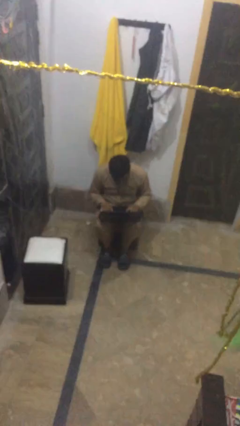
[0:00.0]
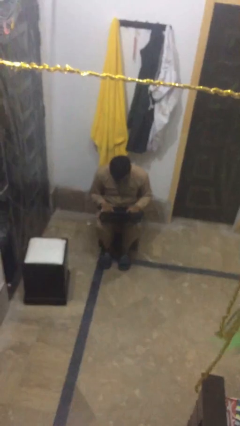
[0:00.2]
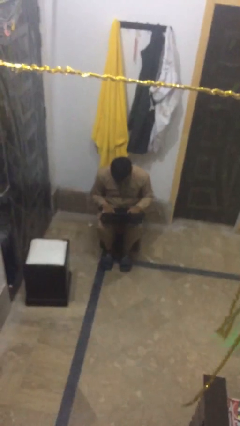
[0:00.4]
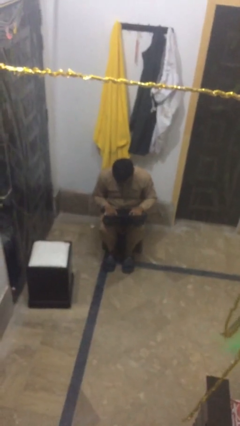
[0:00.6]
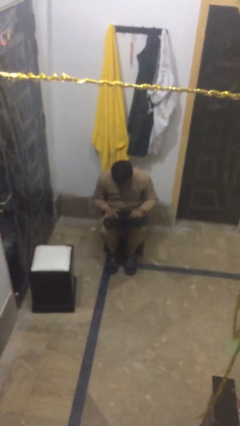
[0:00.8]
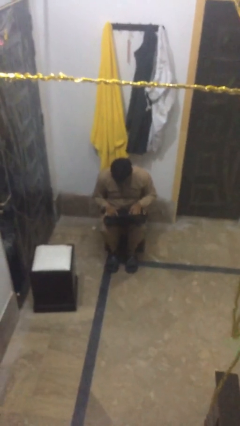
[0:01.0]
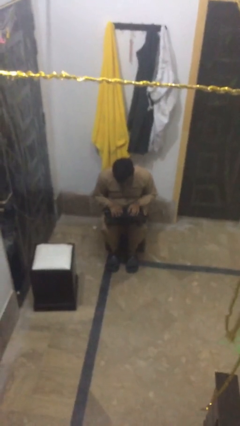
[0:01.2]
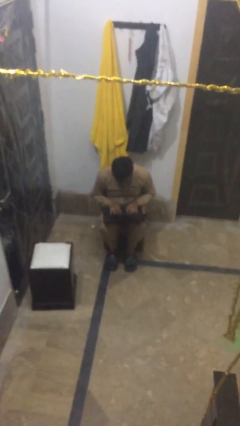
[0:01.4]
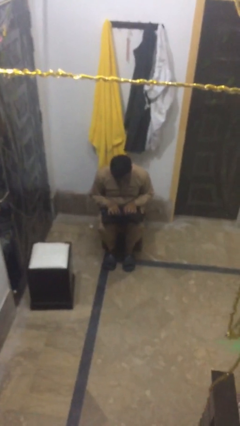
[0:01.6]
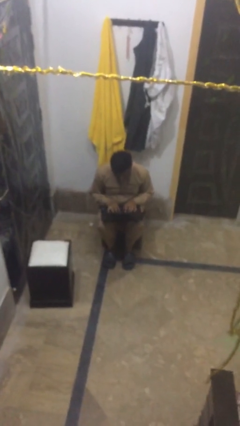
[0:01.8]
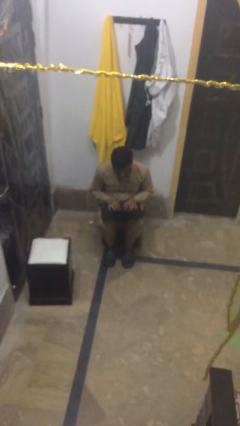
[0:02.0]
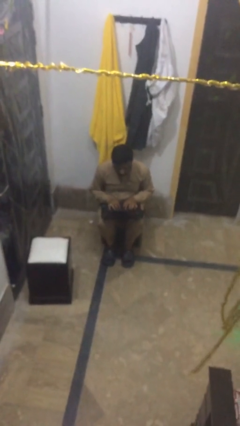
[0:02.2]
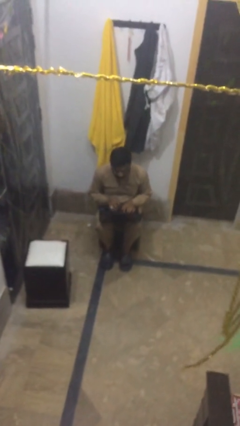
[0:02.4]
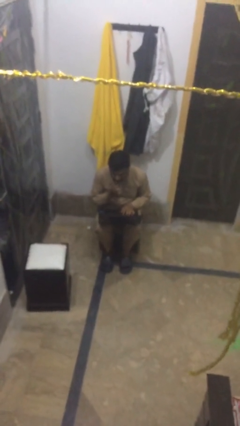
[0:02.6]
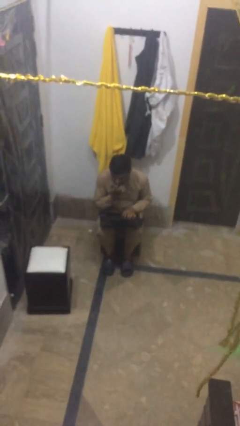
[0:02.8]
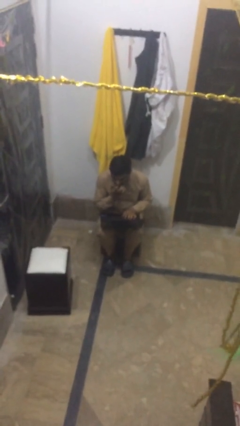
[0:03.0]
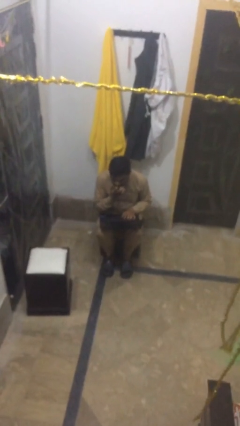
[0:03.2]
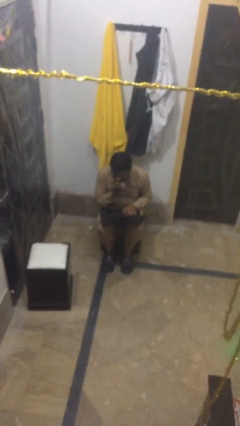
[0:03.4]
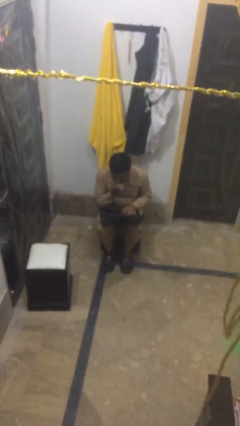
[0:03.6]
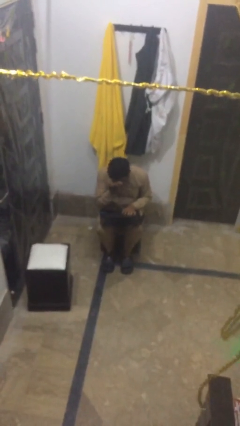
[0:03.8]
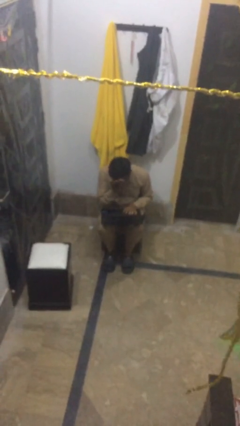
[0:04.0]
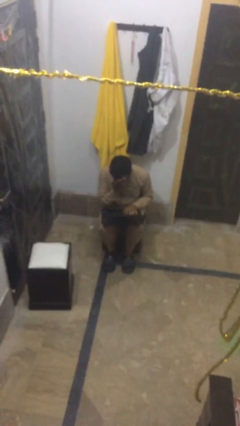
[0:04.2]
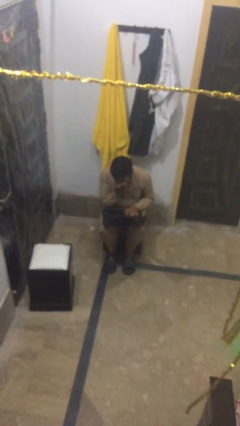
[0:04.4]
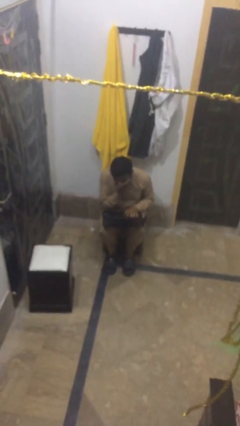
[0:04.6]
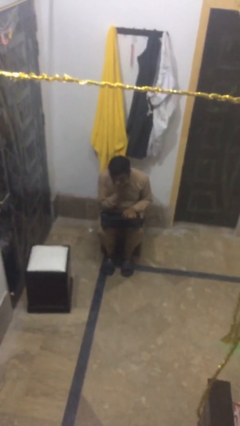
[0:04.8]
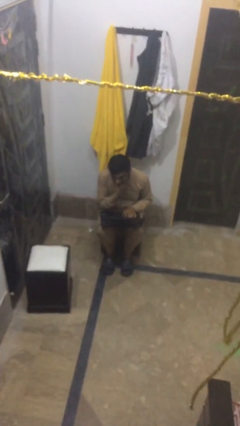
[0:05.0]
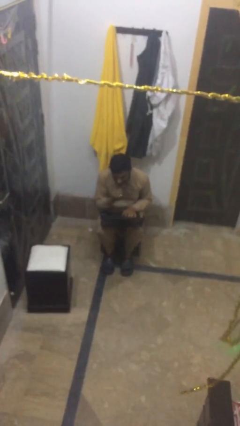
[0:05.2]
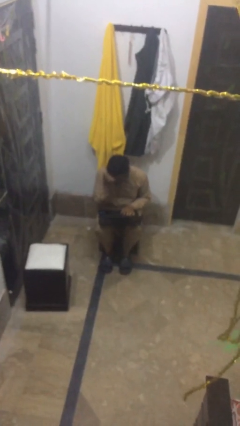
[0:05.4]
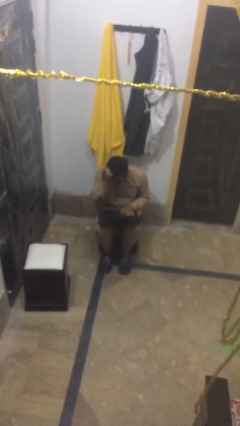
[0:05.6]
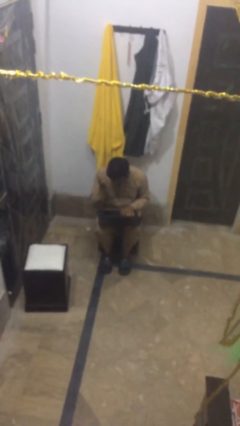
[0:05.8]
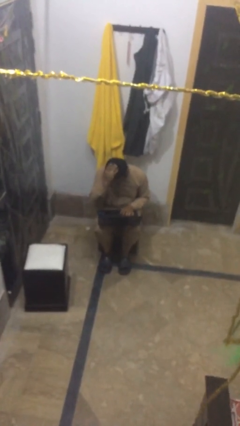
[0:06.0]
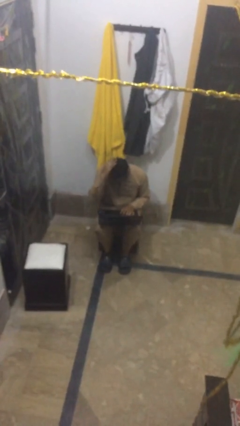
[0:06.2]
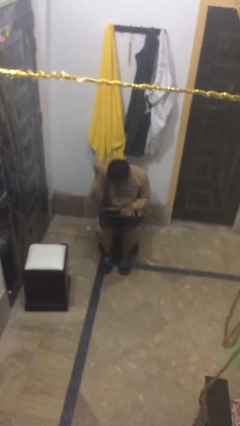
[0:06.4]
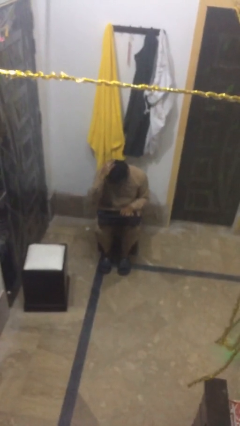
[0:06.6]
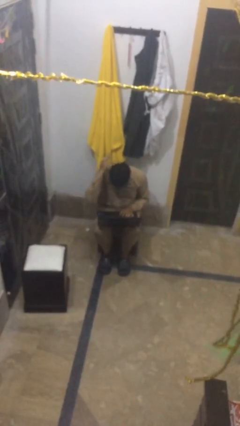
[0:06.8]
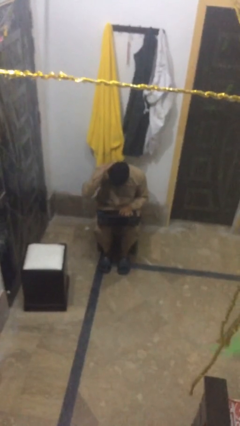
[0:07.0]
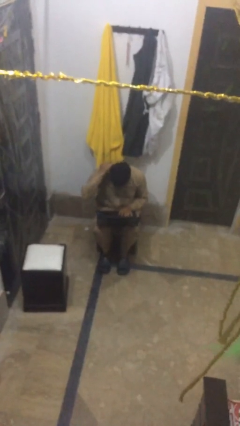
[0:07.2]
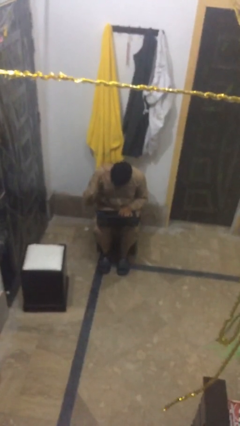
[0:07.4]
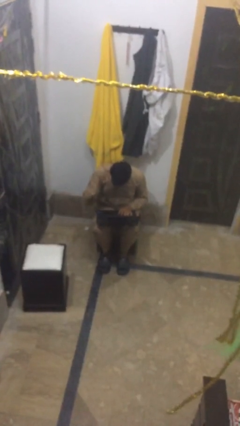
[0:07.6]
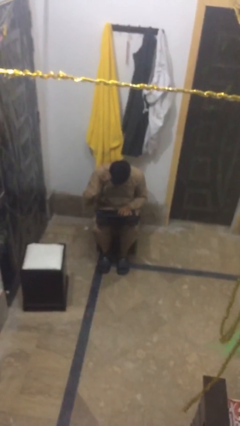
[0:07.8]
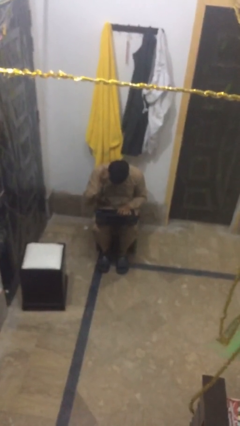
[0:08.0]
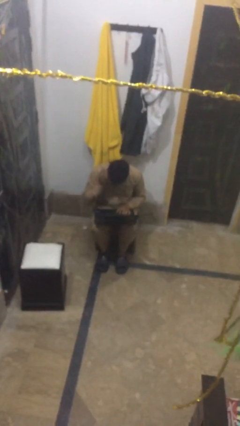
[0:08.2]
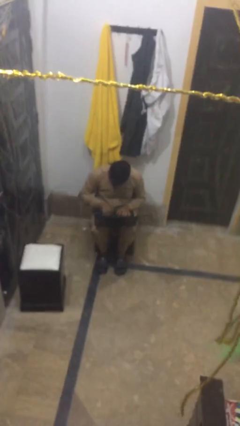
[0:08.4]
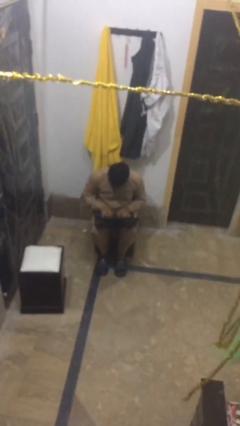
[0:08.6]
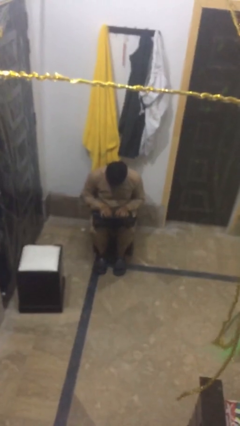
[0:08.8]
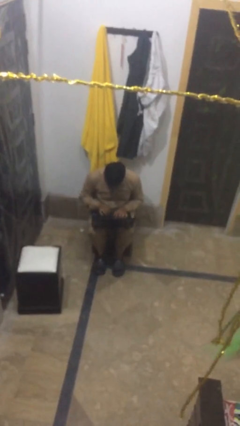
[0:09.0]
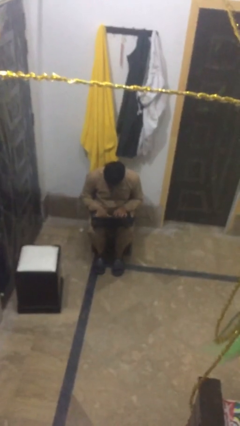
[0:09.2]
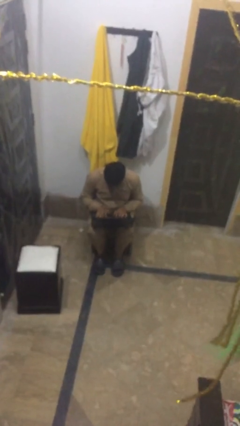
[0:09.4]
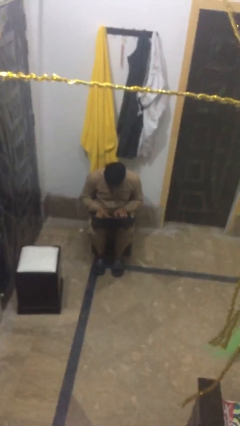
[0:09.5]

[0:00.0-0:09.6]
person interacts with laptop

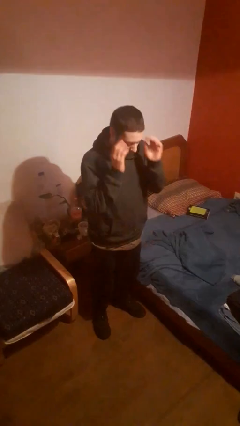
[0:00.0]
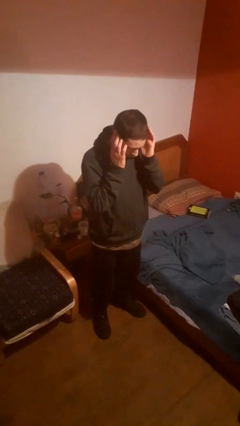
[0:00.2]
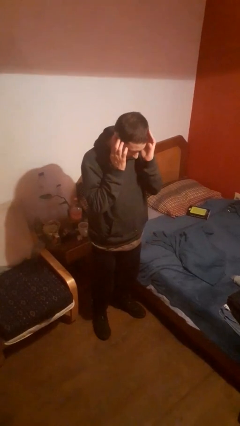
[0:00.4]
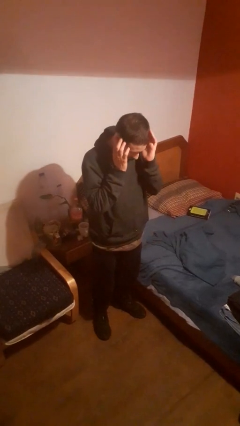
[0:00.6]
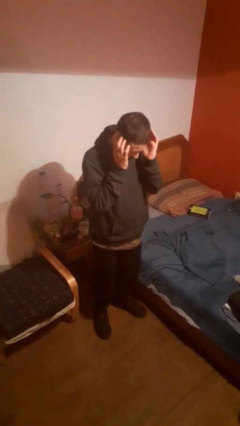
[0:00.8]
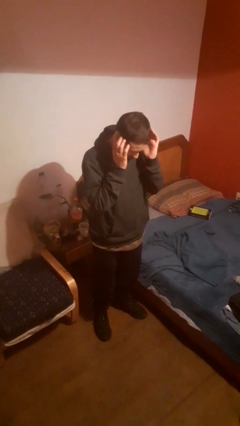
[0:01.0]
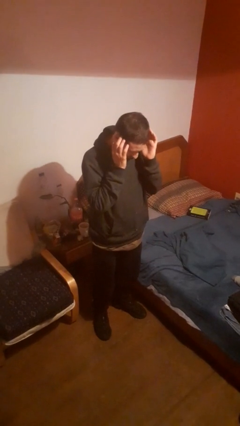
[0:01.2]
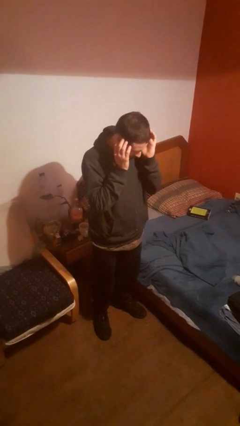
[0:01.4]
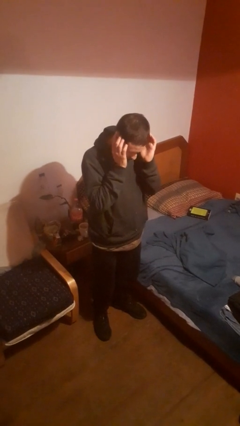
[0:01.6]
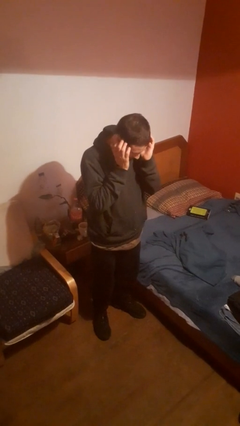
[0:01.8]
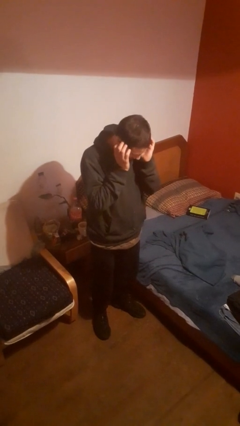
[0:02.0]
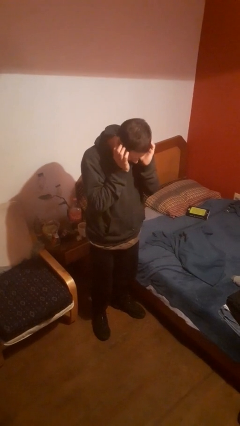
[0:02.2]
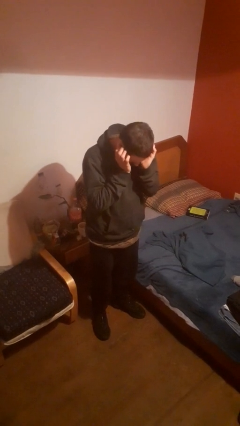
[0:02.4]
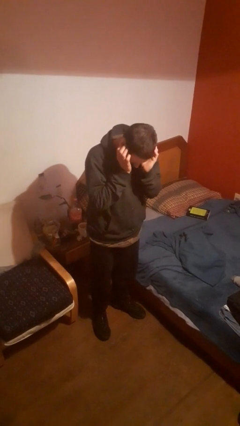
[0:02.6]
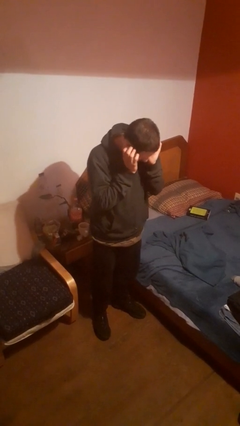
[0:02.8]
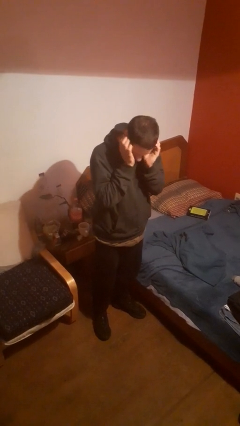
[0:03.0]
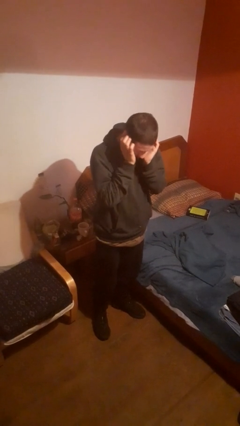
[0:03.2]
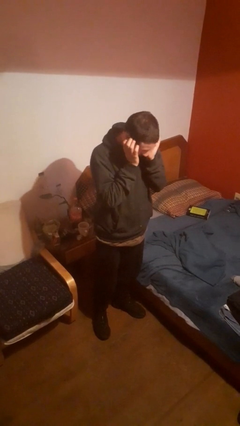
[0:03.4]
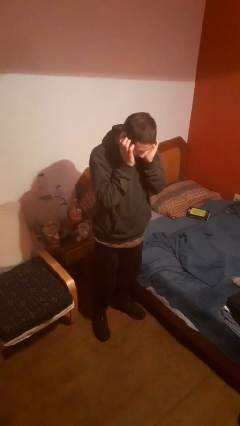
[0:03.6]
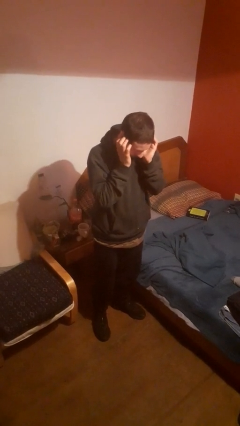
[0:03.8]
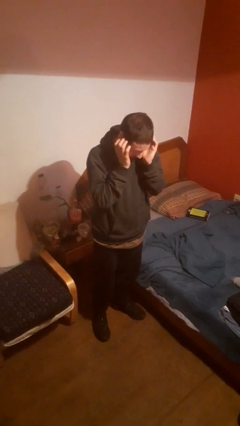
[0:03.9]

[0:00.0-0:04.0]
person puts fingers in ear

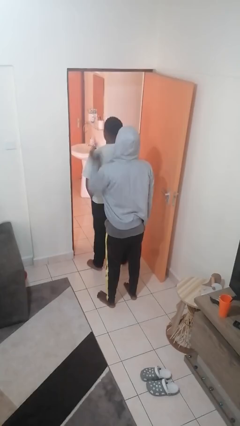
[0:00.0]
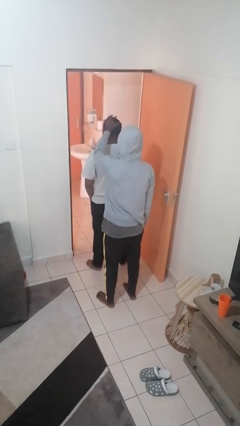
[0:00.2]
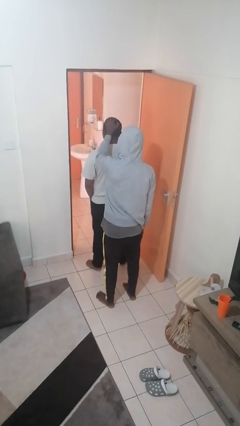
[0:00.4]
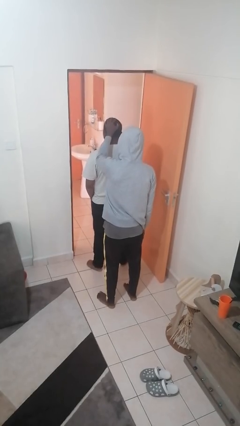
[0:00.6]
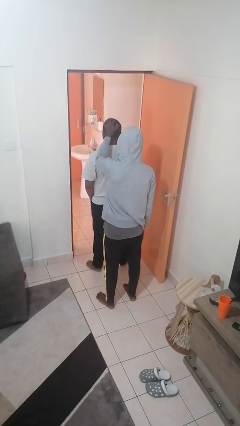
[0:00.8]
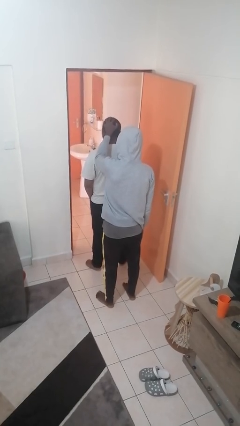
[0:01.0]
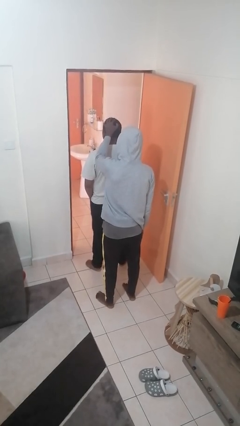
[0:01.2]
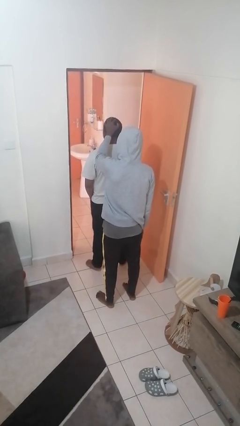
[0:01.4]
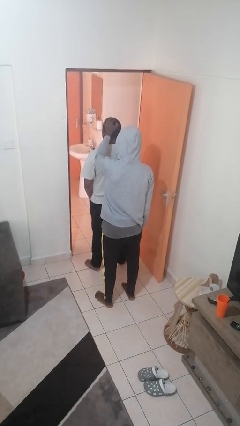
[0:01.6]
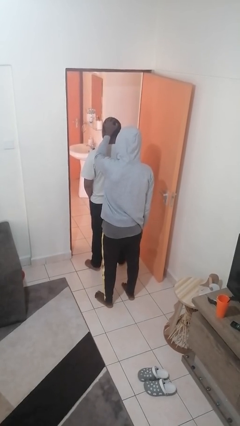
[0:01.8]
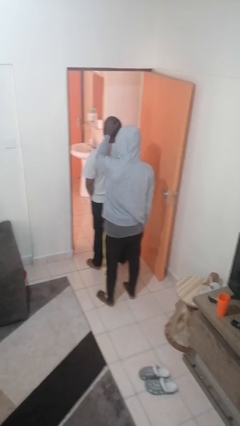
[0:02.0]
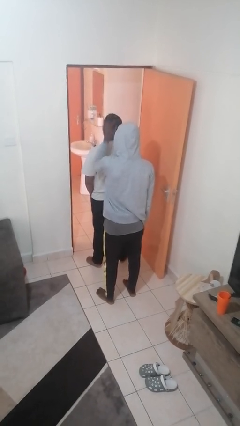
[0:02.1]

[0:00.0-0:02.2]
person grabs person by hair

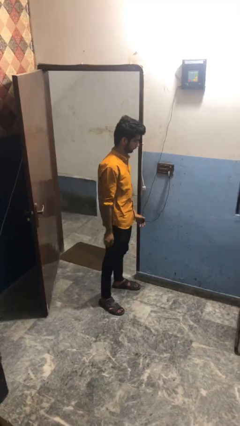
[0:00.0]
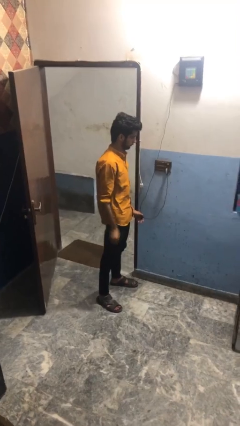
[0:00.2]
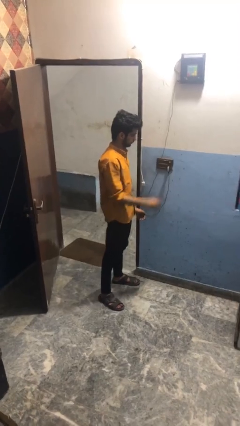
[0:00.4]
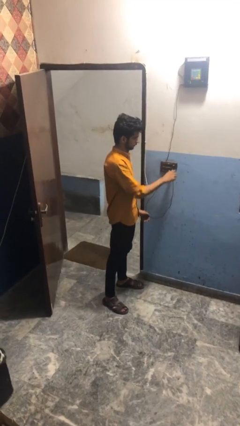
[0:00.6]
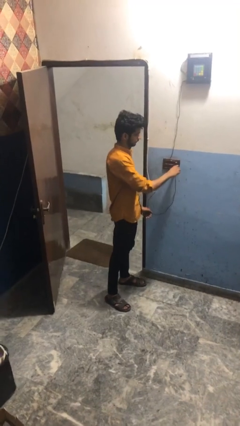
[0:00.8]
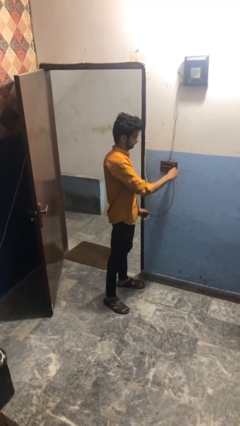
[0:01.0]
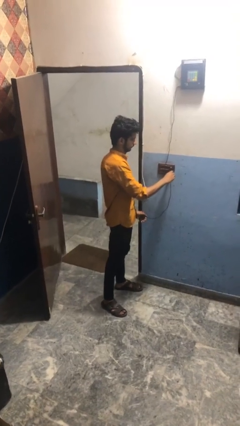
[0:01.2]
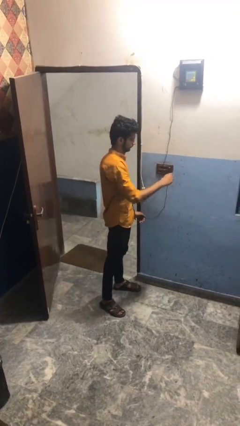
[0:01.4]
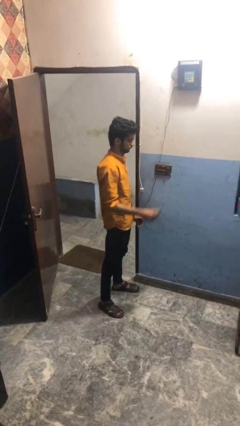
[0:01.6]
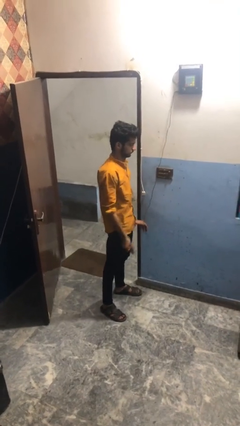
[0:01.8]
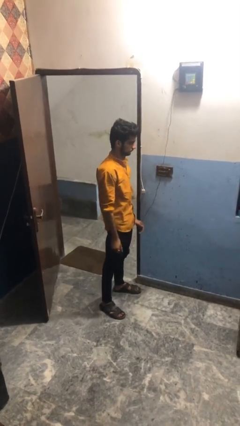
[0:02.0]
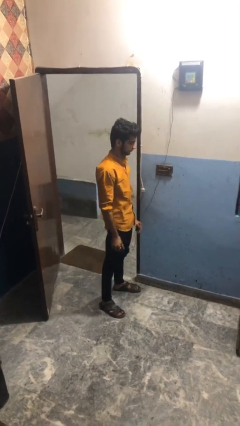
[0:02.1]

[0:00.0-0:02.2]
person unplugs from electrical socket
